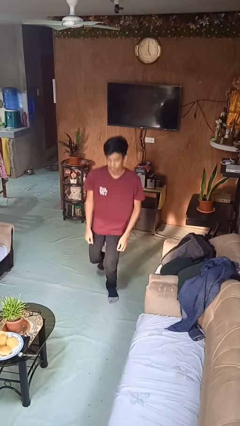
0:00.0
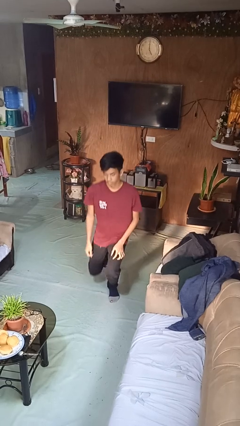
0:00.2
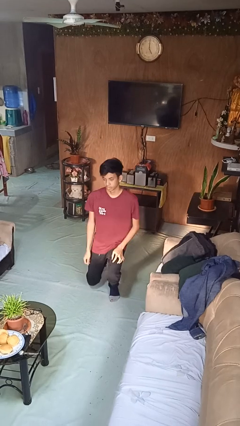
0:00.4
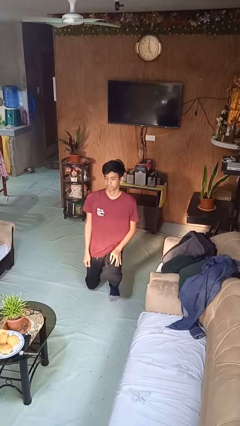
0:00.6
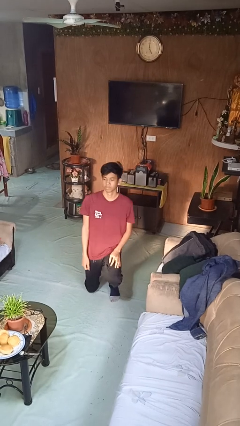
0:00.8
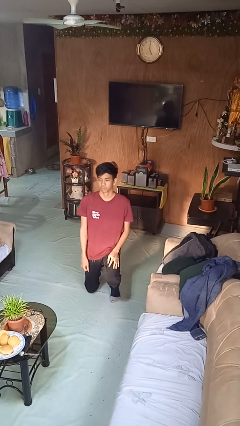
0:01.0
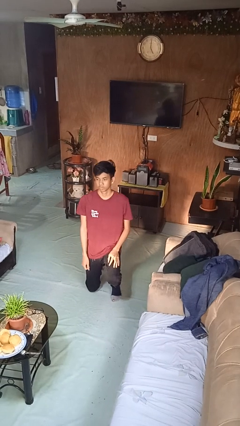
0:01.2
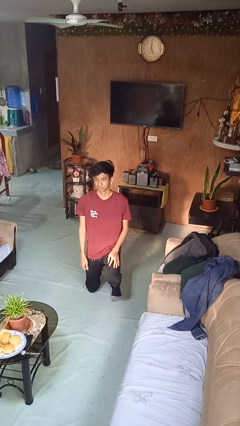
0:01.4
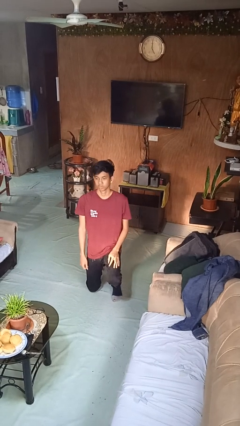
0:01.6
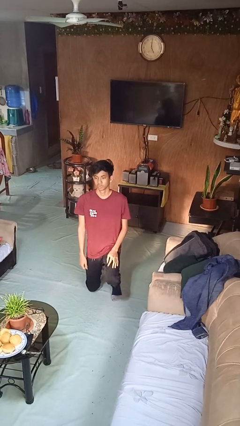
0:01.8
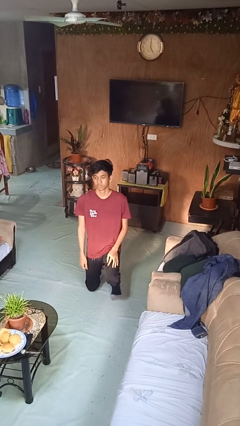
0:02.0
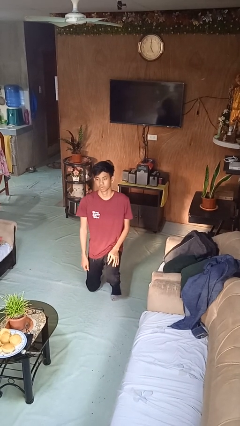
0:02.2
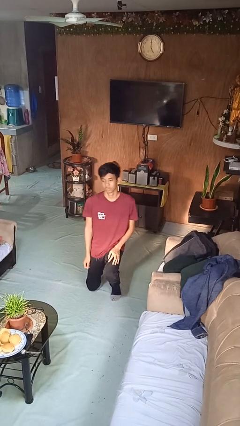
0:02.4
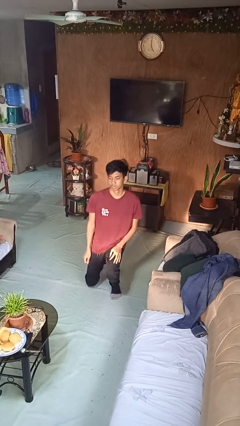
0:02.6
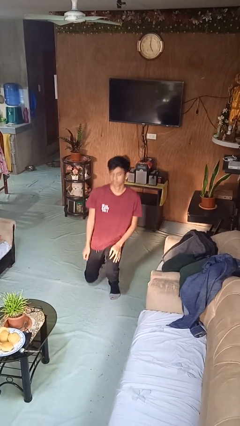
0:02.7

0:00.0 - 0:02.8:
person kneels

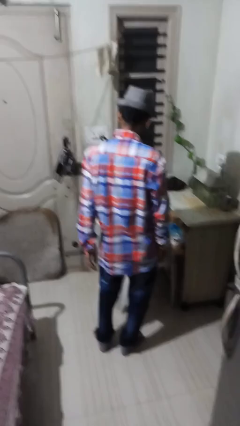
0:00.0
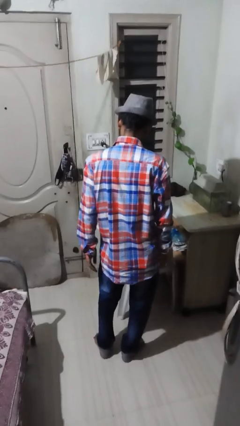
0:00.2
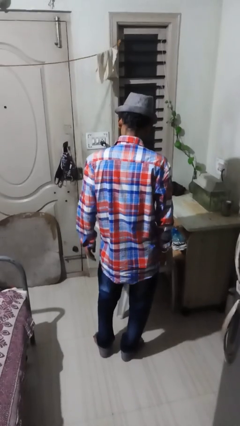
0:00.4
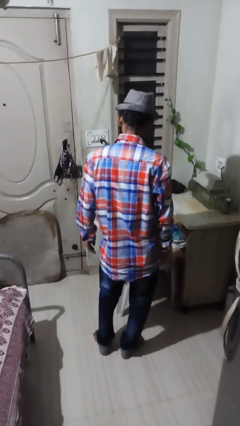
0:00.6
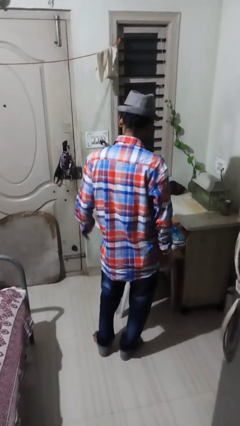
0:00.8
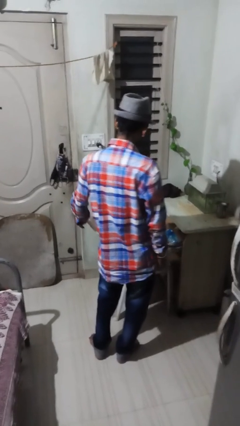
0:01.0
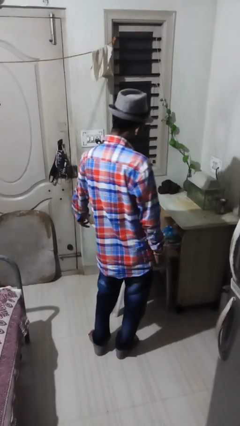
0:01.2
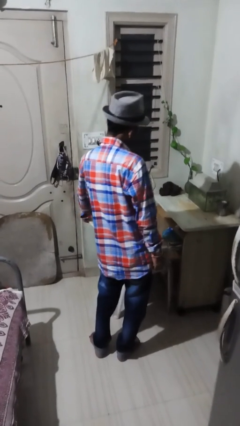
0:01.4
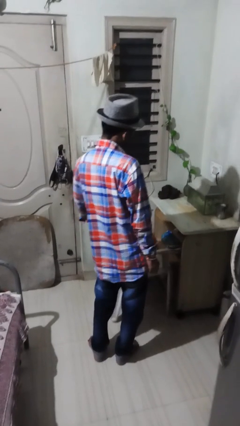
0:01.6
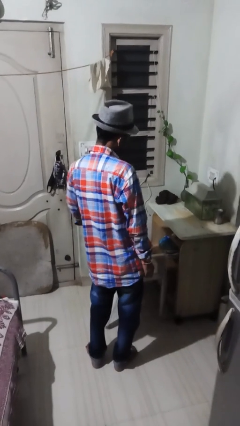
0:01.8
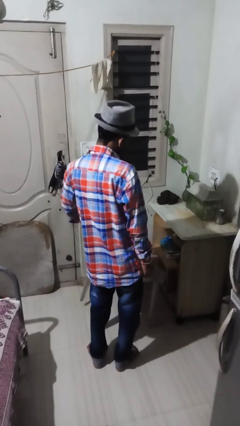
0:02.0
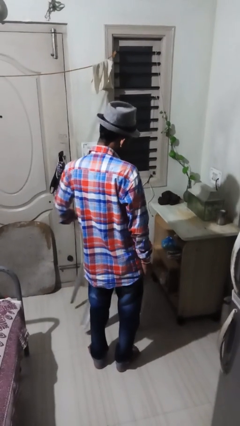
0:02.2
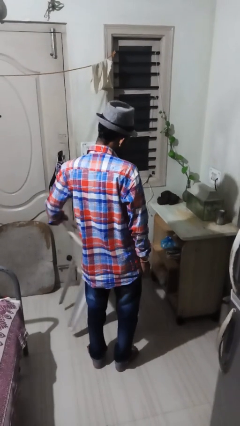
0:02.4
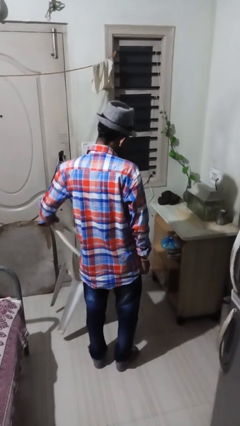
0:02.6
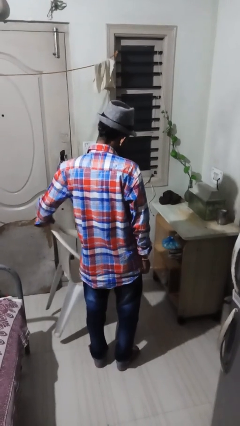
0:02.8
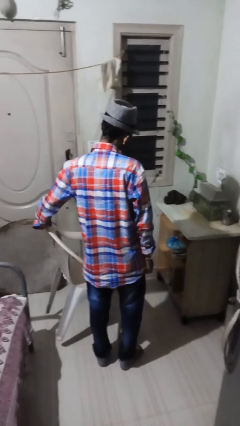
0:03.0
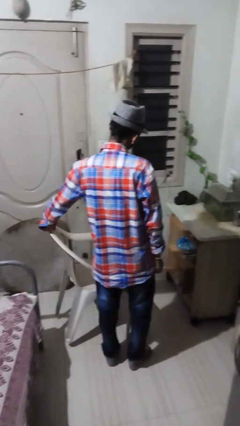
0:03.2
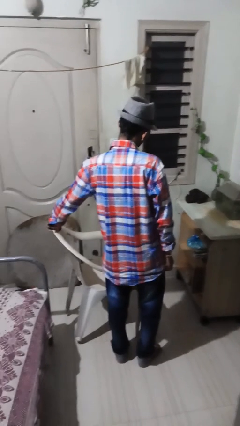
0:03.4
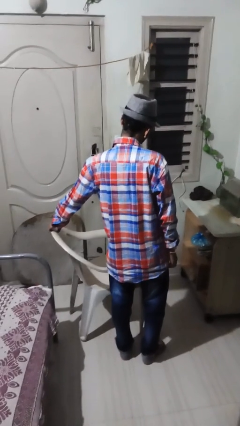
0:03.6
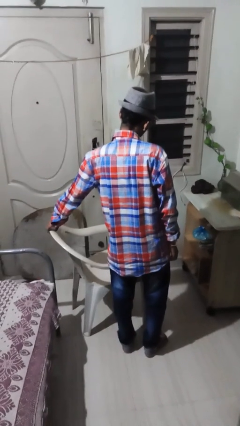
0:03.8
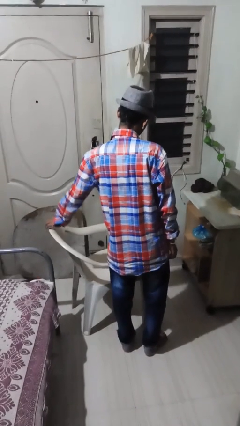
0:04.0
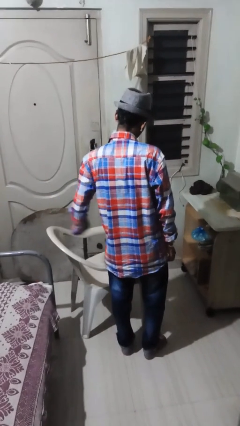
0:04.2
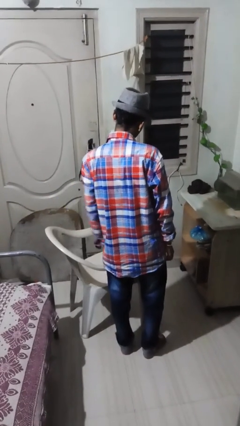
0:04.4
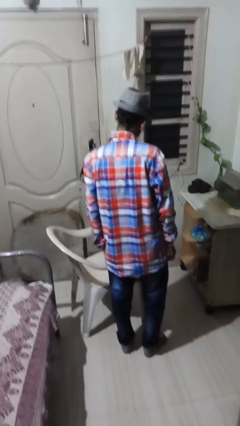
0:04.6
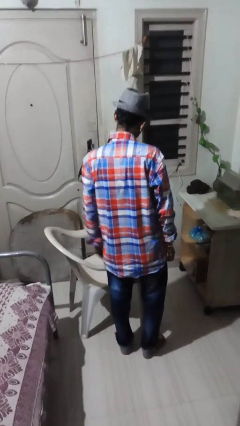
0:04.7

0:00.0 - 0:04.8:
person pulls out chair

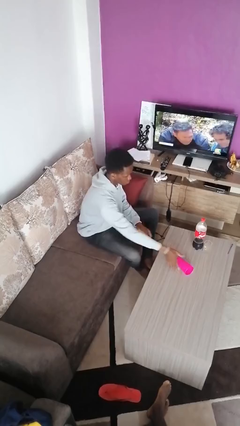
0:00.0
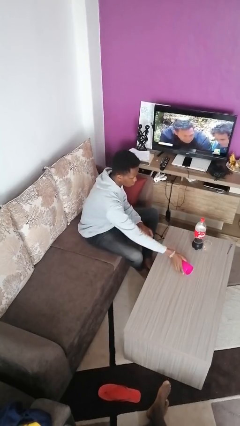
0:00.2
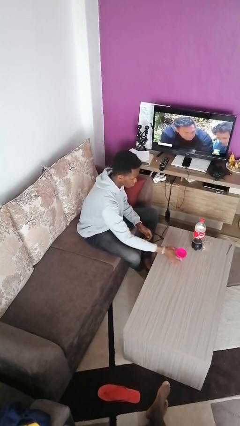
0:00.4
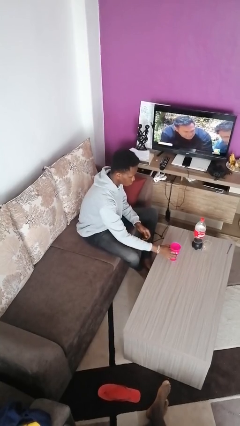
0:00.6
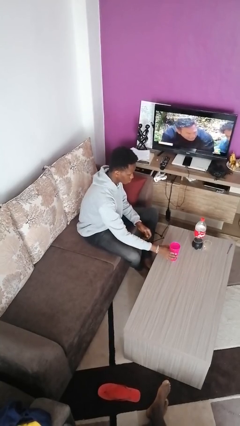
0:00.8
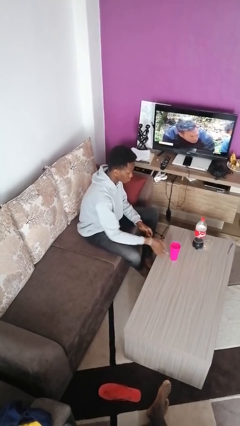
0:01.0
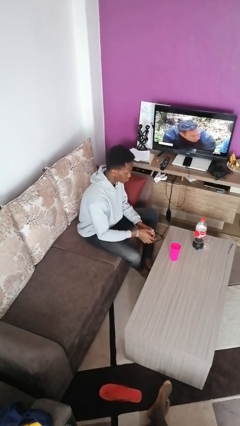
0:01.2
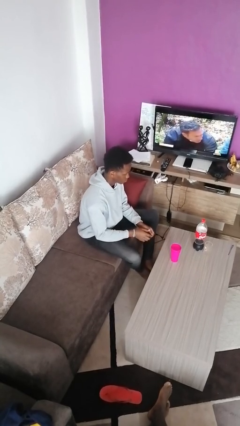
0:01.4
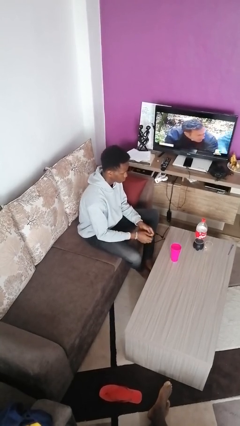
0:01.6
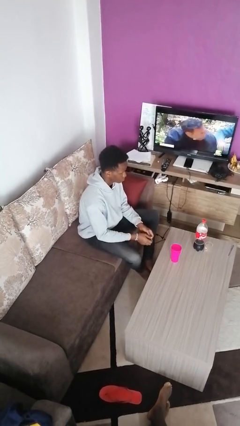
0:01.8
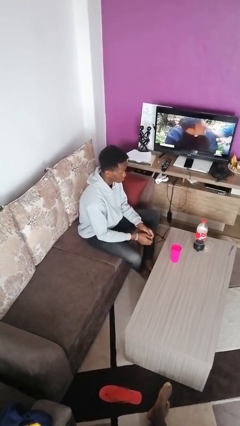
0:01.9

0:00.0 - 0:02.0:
person sets upright glass

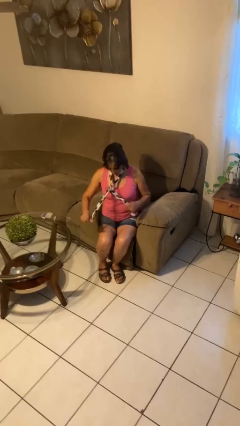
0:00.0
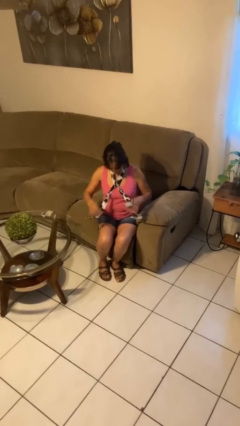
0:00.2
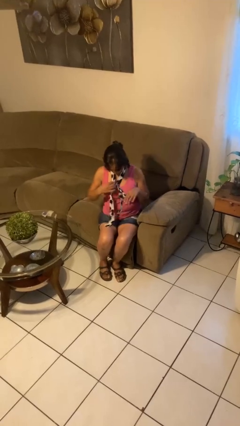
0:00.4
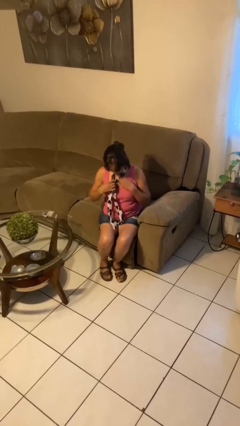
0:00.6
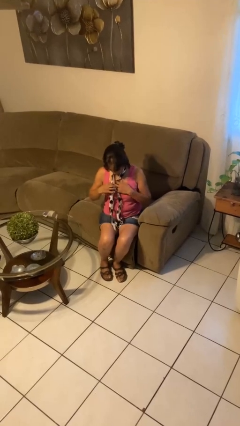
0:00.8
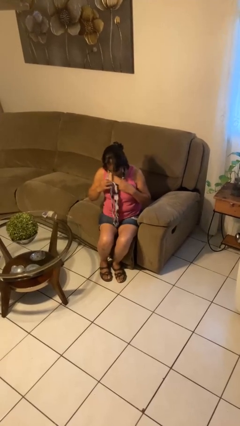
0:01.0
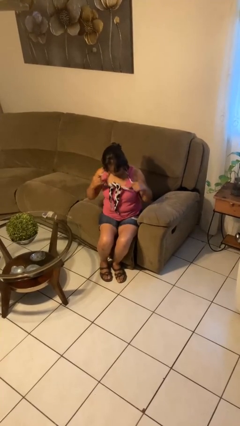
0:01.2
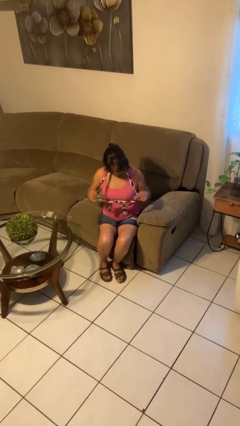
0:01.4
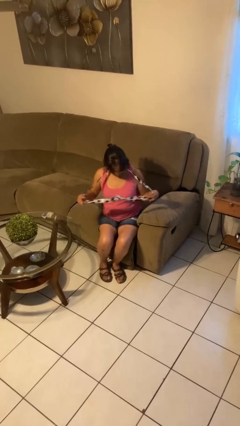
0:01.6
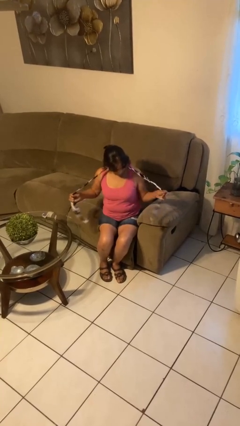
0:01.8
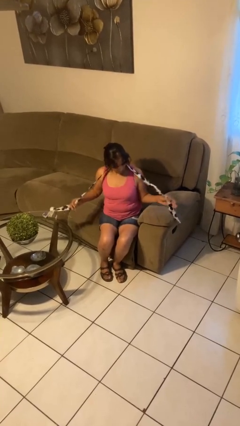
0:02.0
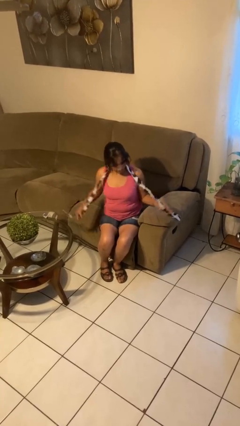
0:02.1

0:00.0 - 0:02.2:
person takes off necktie

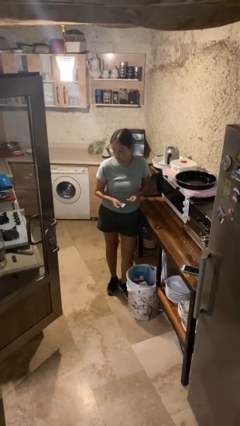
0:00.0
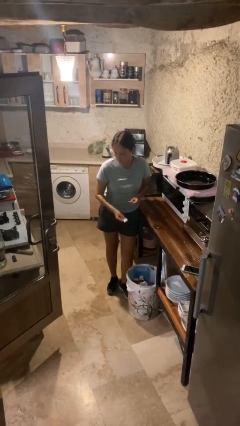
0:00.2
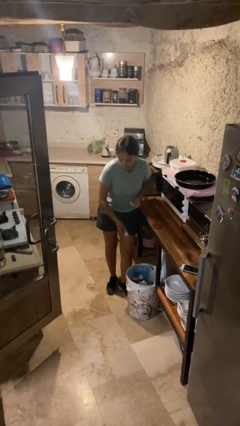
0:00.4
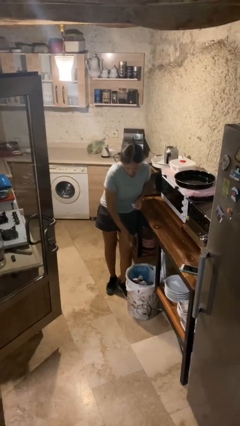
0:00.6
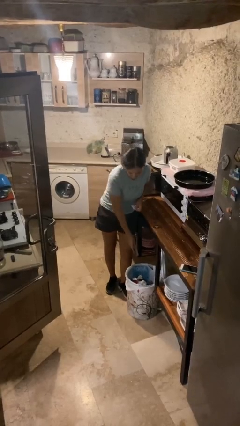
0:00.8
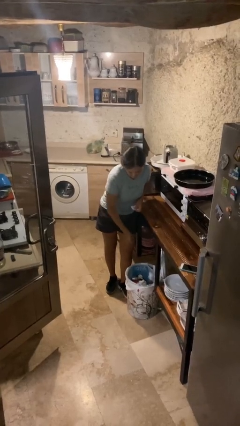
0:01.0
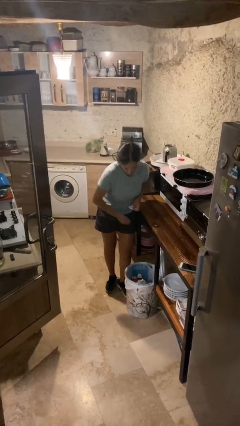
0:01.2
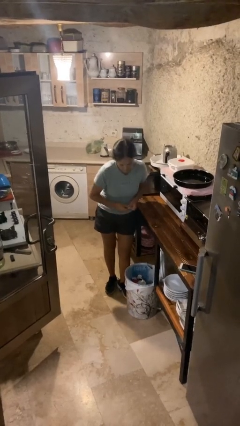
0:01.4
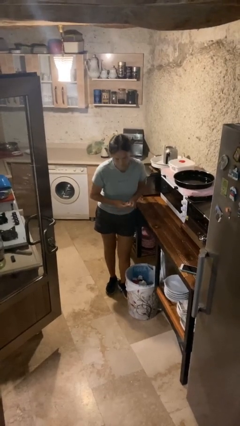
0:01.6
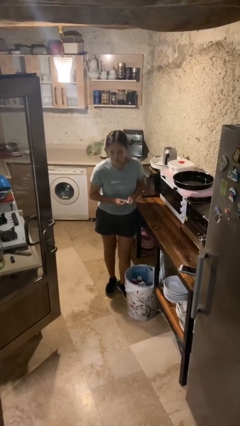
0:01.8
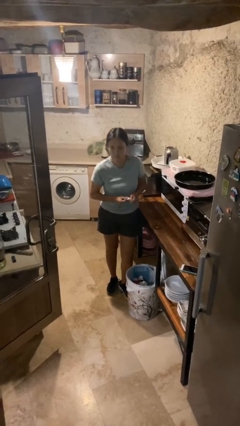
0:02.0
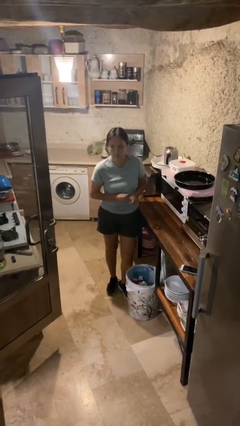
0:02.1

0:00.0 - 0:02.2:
person discards trash

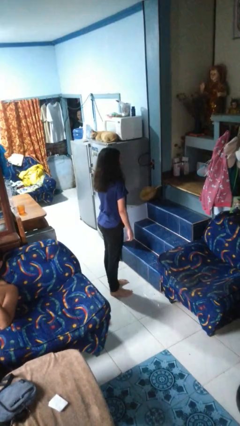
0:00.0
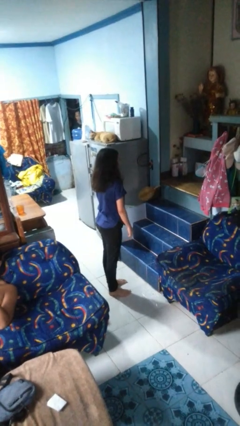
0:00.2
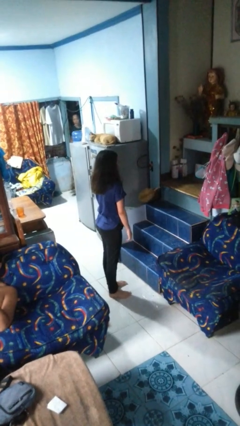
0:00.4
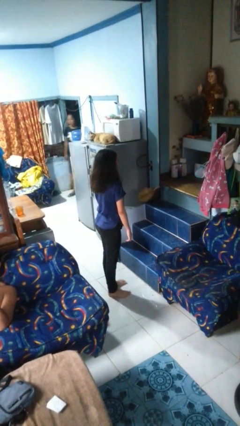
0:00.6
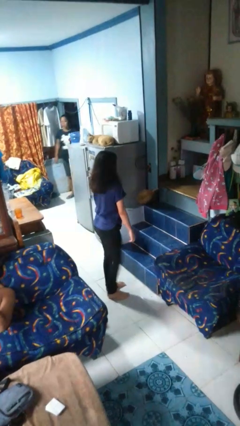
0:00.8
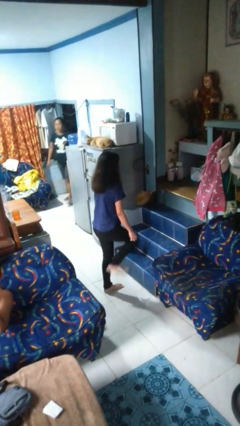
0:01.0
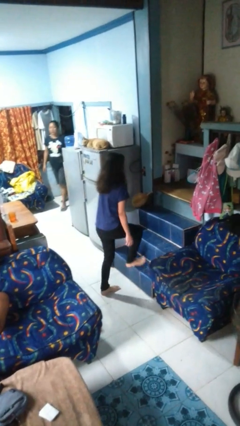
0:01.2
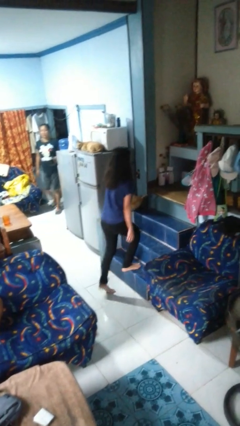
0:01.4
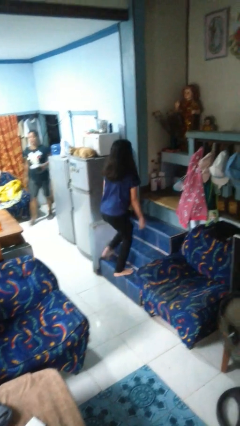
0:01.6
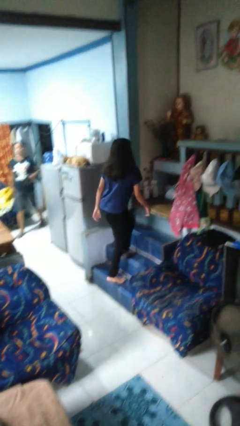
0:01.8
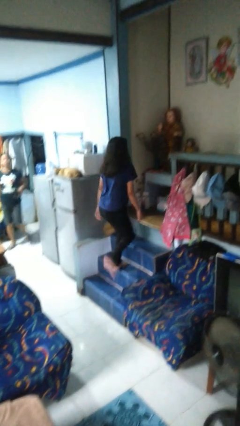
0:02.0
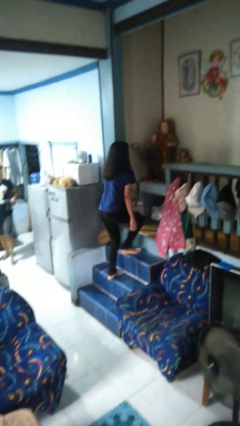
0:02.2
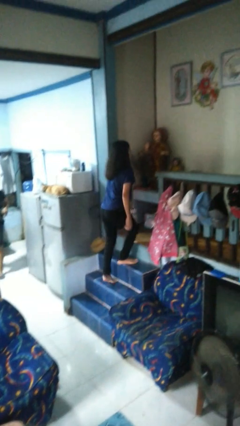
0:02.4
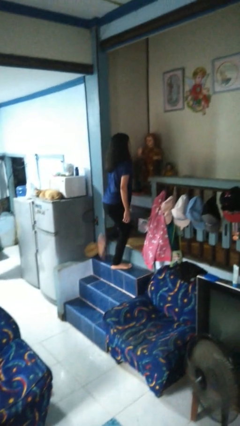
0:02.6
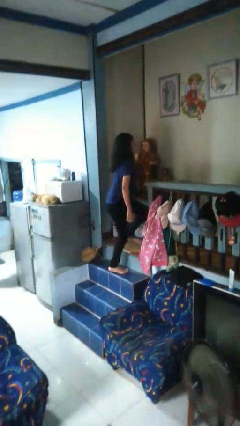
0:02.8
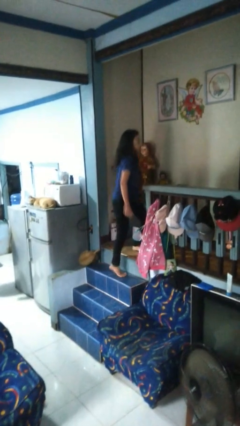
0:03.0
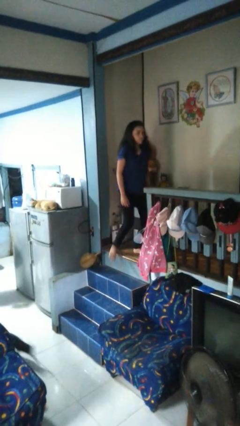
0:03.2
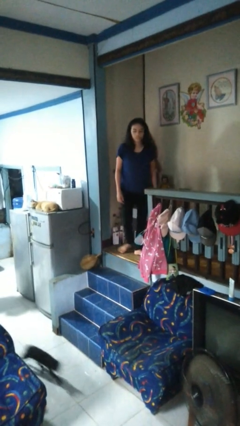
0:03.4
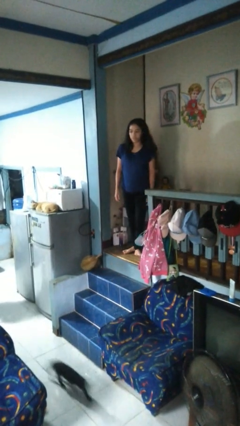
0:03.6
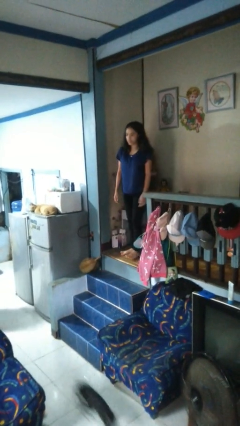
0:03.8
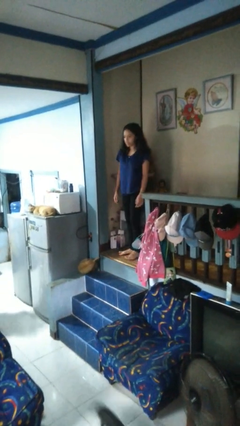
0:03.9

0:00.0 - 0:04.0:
person climbs up stairs
